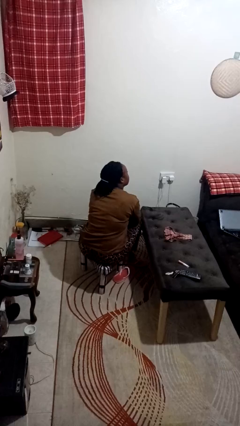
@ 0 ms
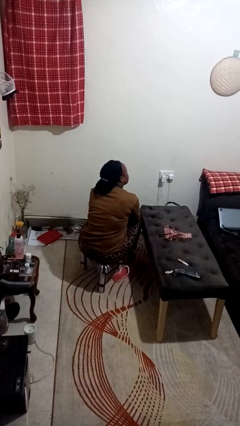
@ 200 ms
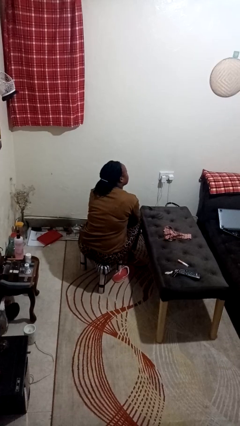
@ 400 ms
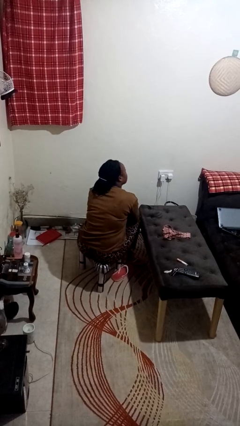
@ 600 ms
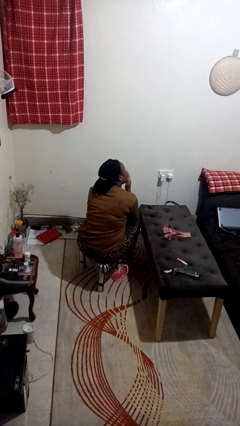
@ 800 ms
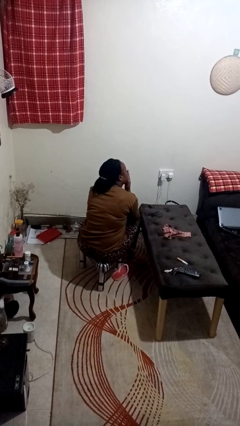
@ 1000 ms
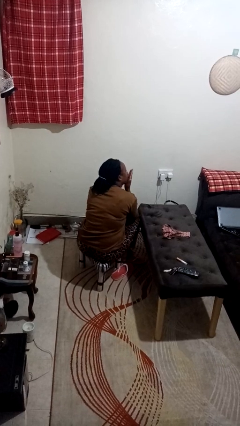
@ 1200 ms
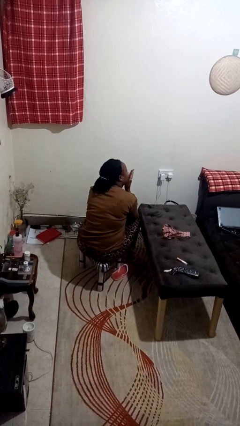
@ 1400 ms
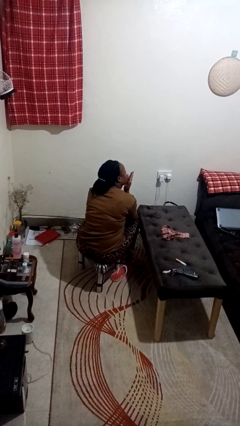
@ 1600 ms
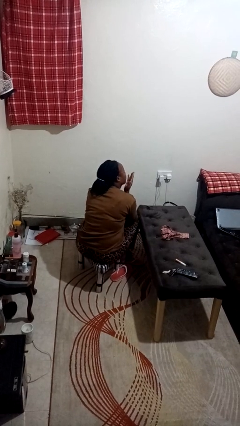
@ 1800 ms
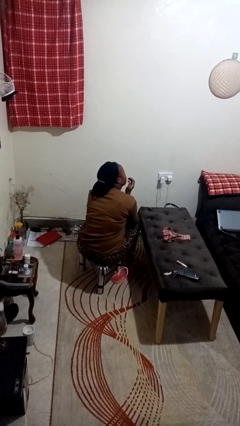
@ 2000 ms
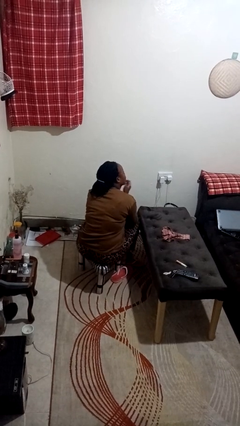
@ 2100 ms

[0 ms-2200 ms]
person gestures blow kiss

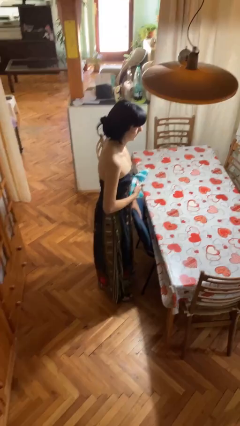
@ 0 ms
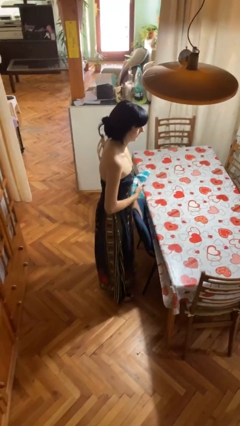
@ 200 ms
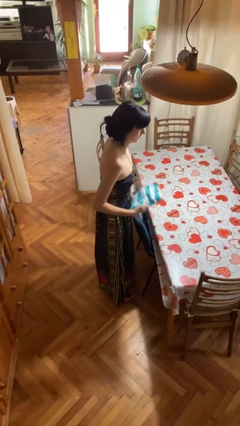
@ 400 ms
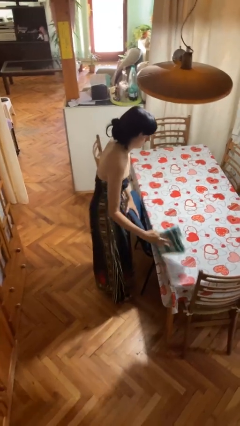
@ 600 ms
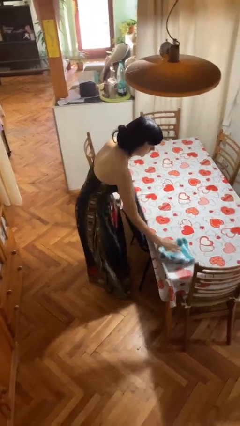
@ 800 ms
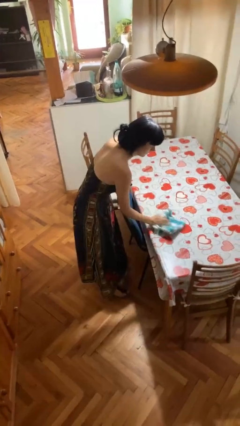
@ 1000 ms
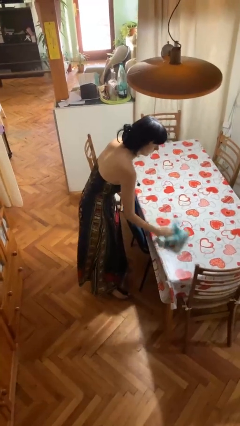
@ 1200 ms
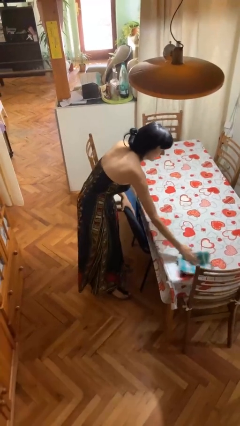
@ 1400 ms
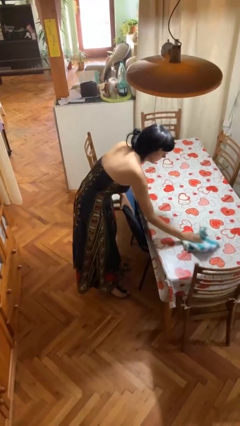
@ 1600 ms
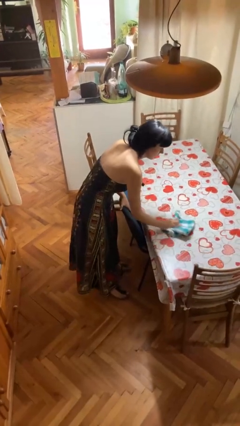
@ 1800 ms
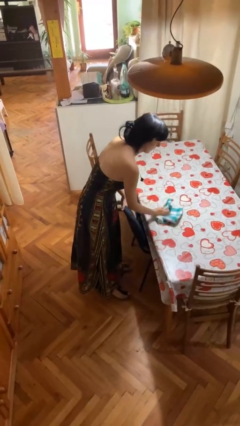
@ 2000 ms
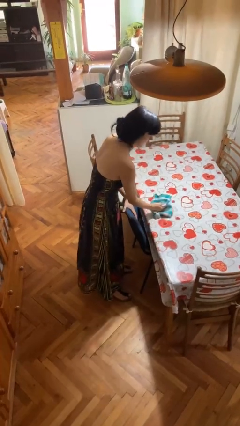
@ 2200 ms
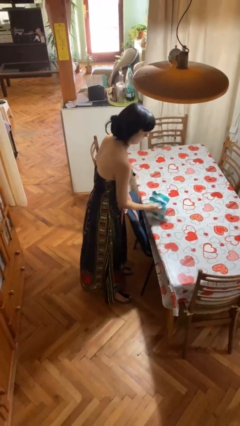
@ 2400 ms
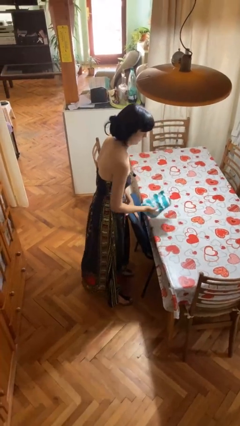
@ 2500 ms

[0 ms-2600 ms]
person cleans table with rag

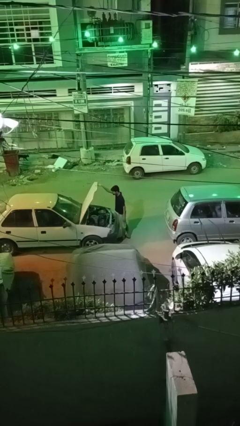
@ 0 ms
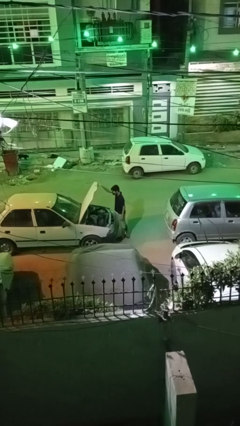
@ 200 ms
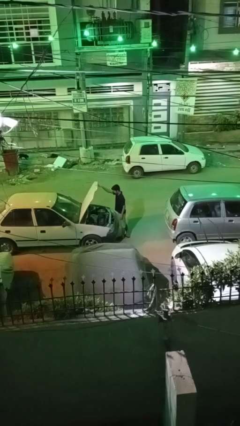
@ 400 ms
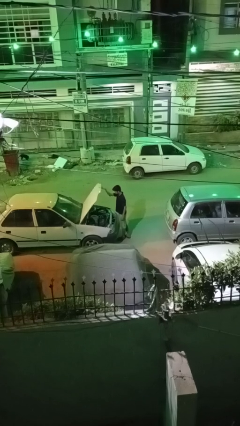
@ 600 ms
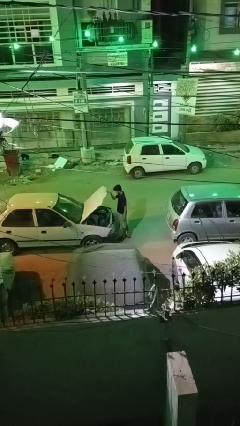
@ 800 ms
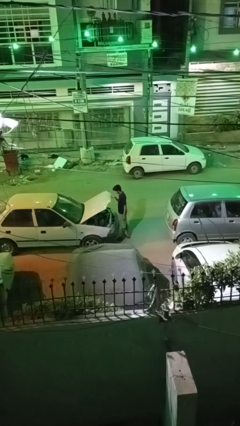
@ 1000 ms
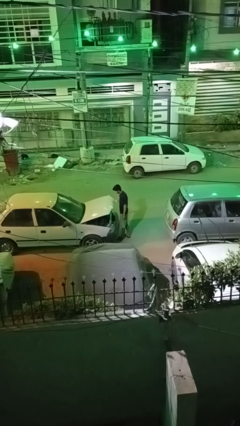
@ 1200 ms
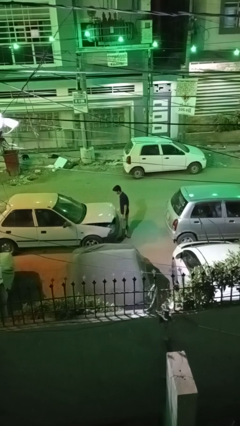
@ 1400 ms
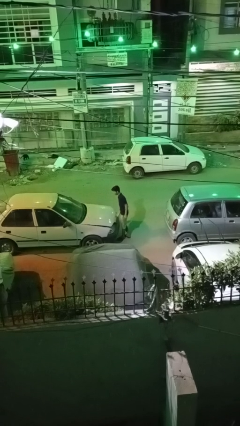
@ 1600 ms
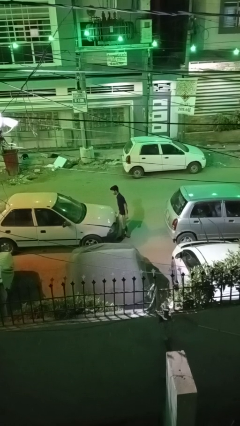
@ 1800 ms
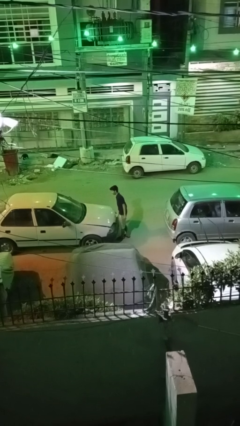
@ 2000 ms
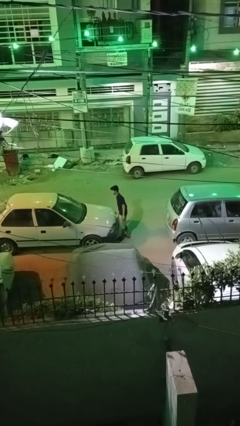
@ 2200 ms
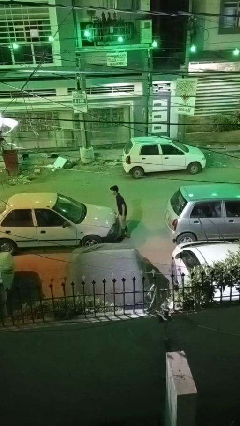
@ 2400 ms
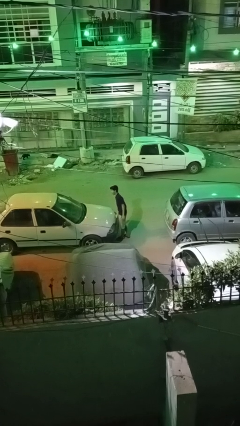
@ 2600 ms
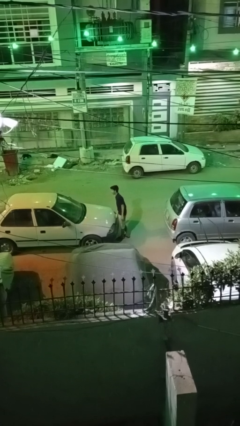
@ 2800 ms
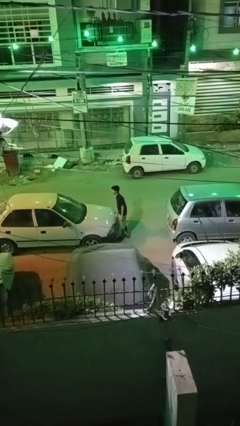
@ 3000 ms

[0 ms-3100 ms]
person closes car hood

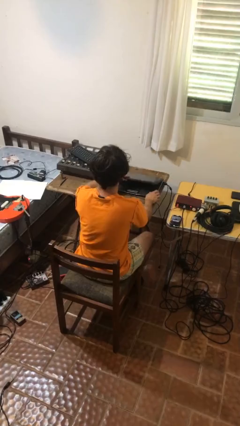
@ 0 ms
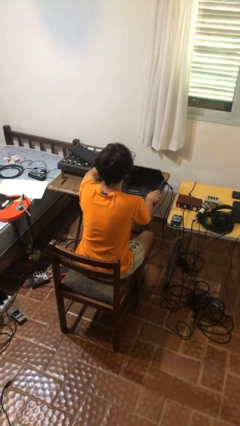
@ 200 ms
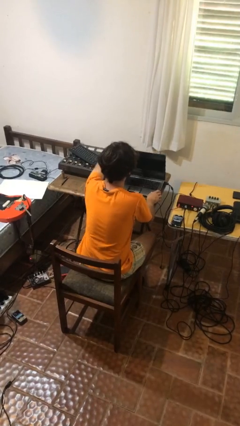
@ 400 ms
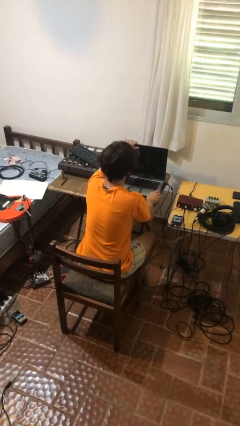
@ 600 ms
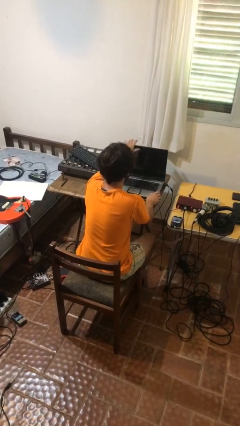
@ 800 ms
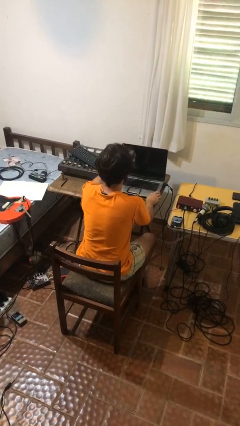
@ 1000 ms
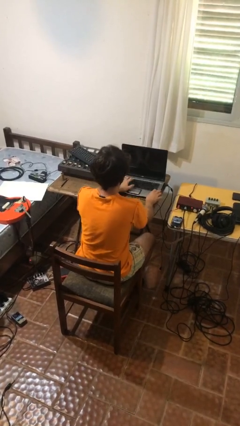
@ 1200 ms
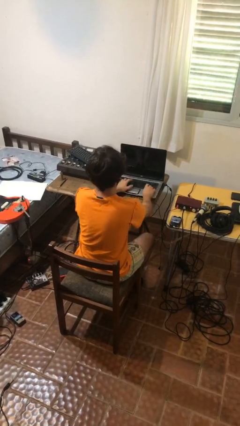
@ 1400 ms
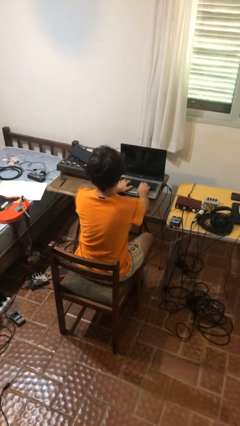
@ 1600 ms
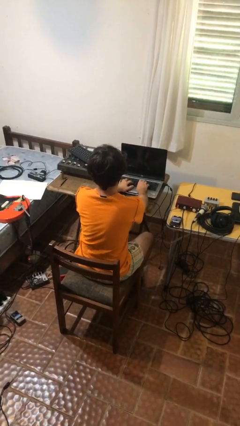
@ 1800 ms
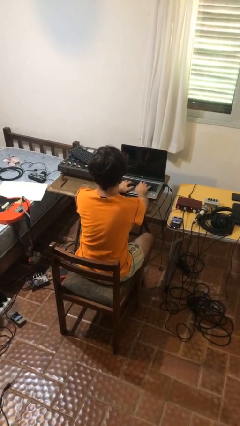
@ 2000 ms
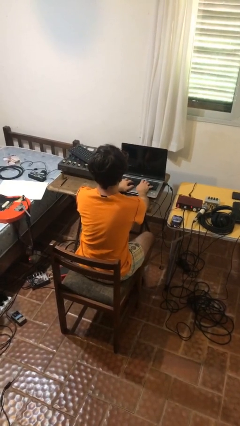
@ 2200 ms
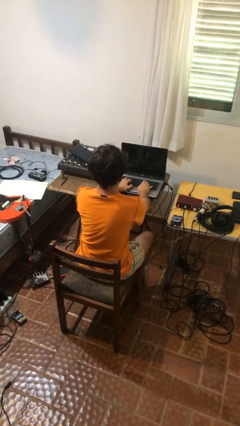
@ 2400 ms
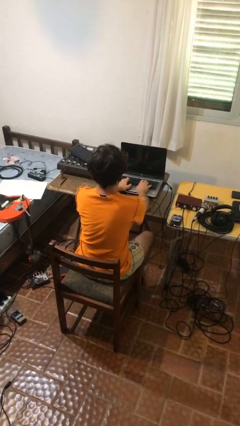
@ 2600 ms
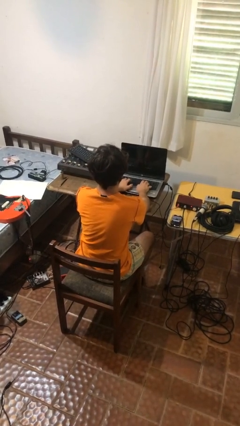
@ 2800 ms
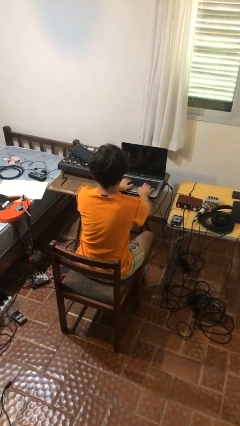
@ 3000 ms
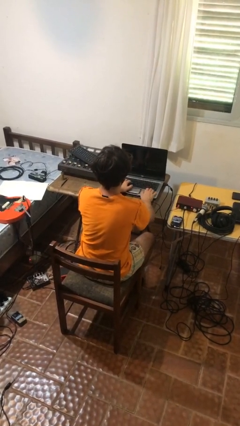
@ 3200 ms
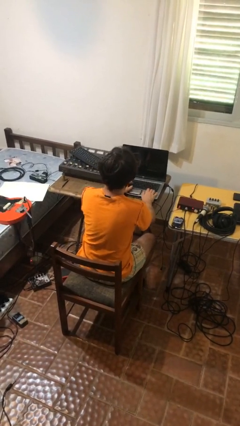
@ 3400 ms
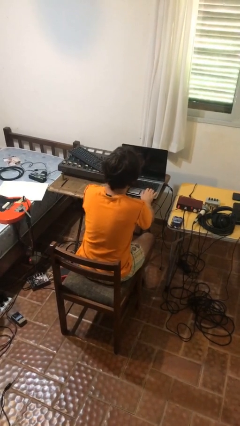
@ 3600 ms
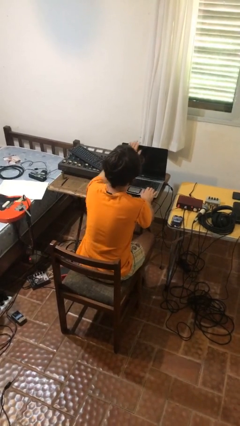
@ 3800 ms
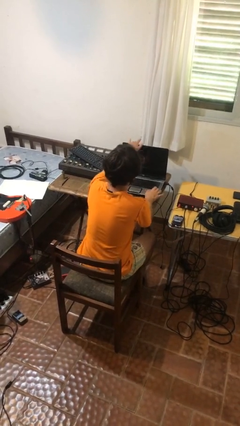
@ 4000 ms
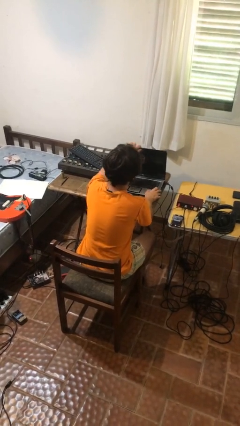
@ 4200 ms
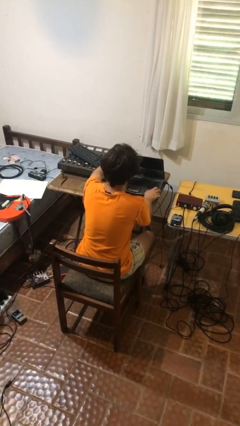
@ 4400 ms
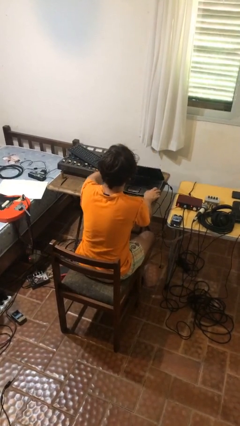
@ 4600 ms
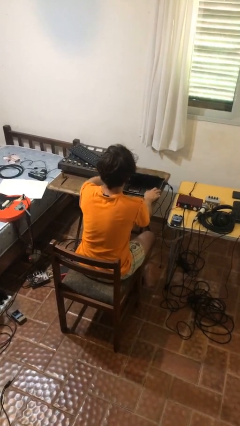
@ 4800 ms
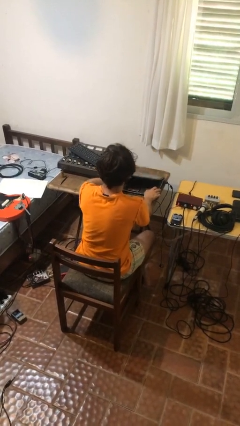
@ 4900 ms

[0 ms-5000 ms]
person interacts with laptop

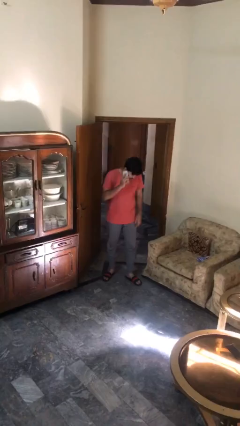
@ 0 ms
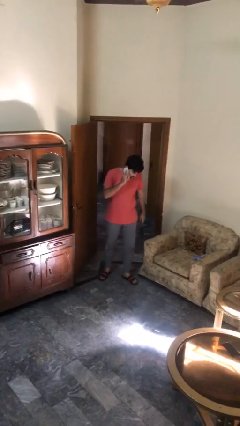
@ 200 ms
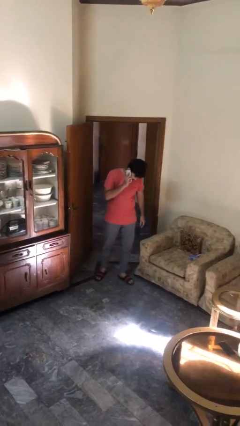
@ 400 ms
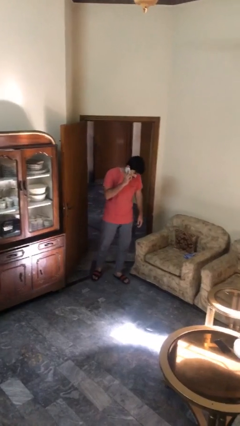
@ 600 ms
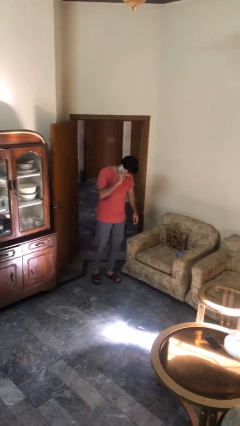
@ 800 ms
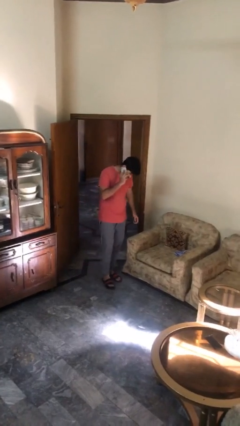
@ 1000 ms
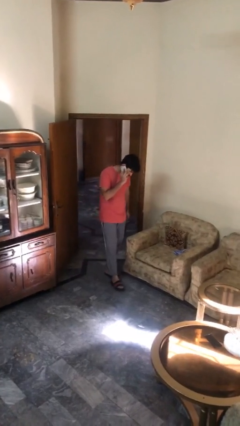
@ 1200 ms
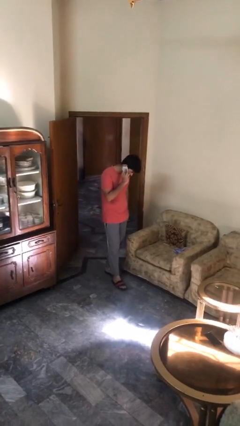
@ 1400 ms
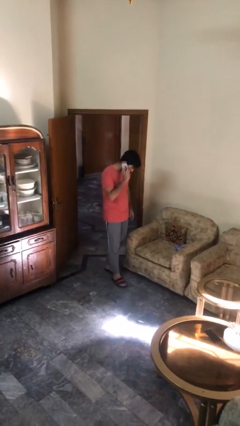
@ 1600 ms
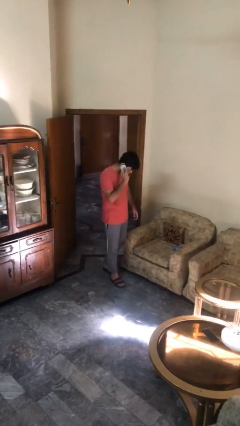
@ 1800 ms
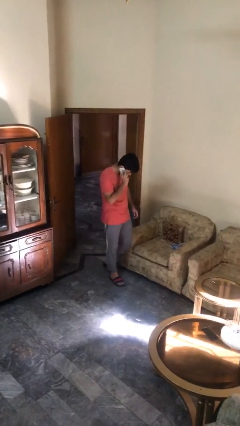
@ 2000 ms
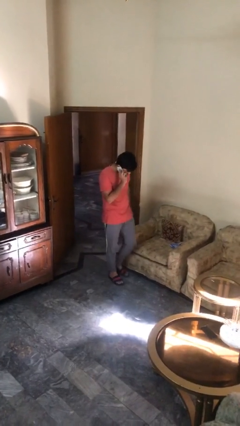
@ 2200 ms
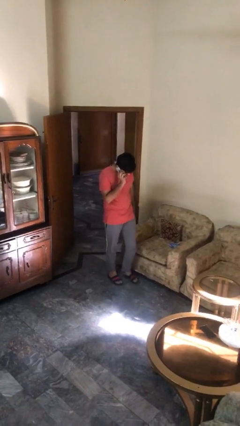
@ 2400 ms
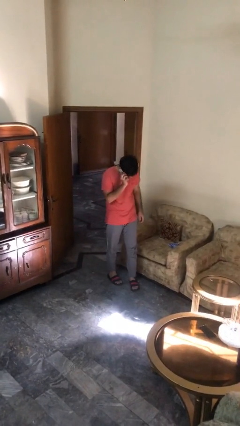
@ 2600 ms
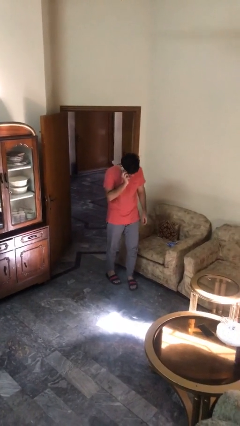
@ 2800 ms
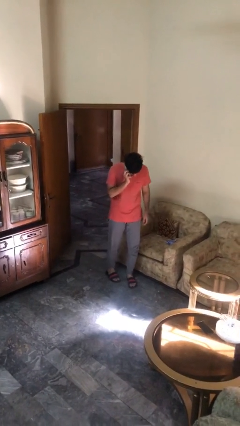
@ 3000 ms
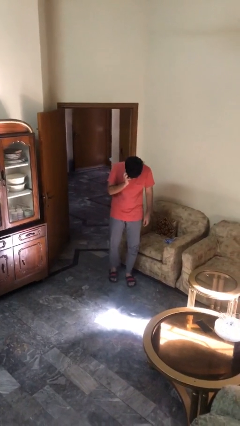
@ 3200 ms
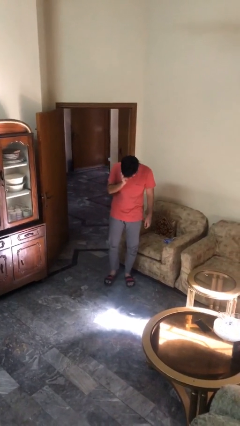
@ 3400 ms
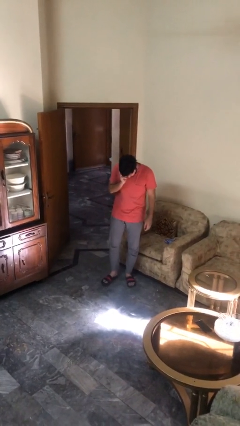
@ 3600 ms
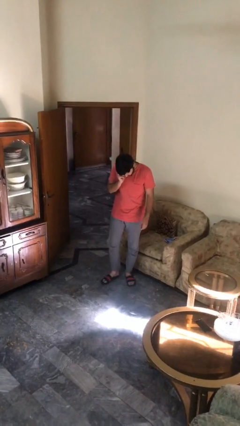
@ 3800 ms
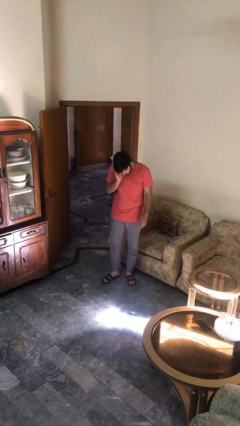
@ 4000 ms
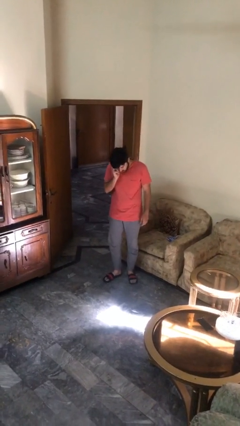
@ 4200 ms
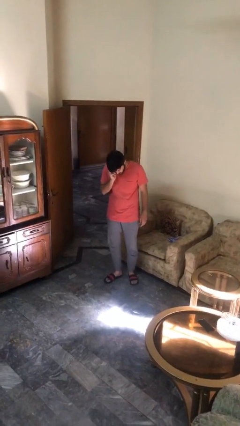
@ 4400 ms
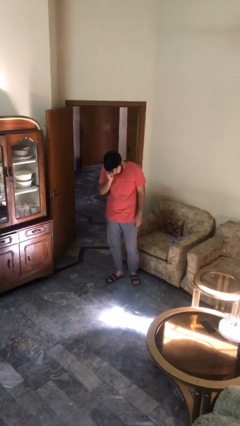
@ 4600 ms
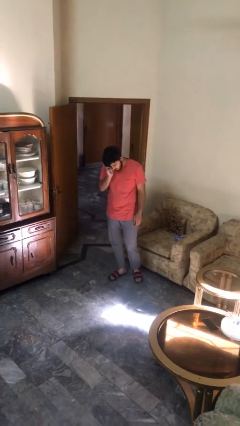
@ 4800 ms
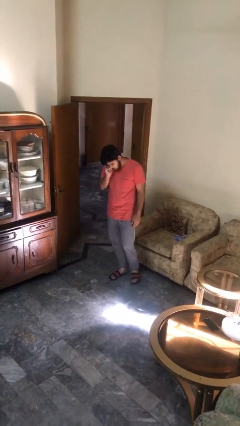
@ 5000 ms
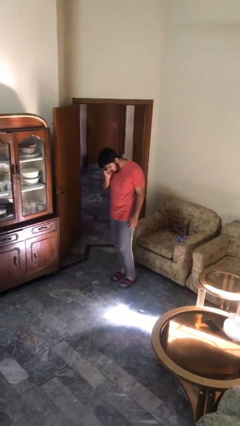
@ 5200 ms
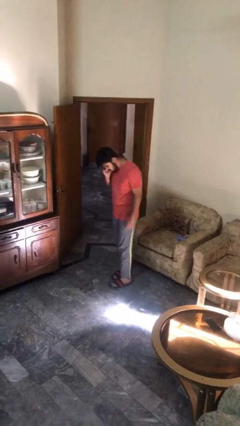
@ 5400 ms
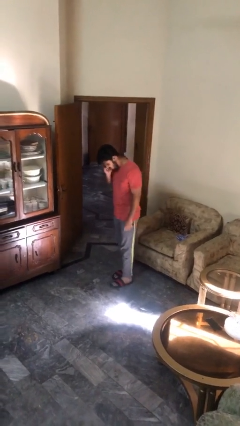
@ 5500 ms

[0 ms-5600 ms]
person talks on phone
